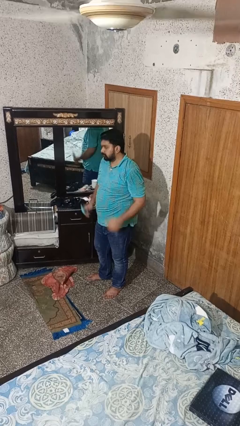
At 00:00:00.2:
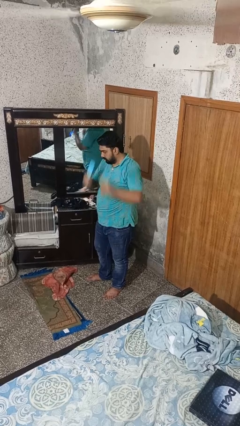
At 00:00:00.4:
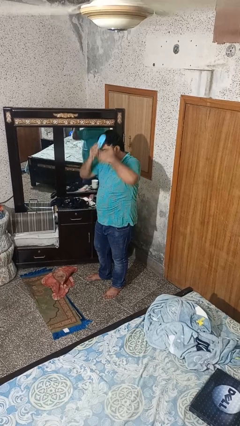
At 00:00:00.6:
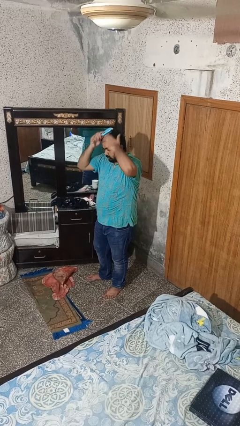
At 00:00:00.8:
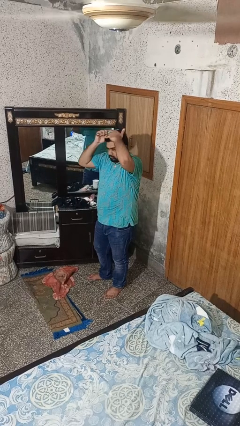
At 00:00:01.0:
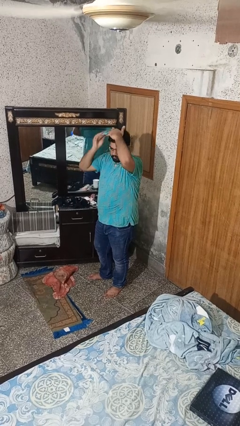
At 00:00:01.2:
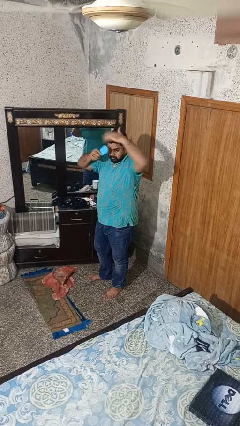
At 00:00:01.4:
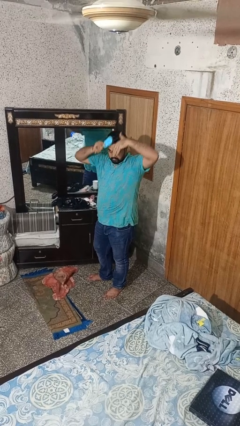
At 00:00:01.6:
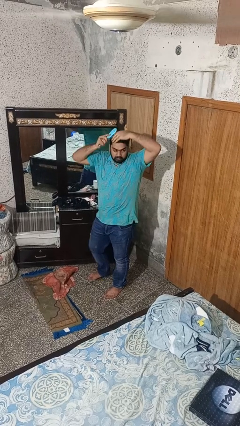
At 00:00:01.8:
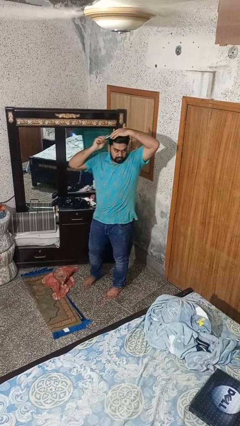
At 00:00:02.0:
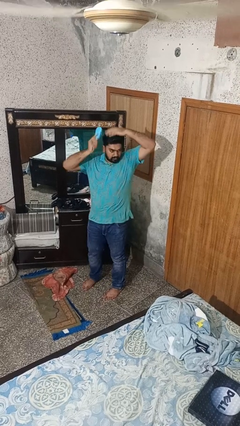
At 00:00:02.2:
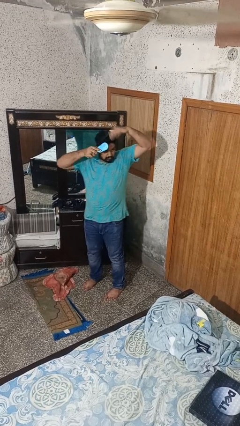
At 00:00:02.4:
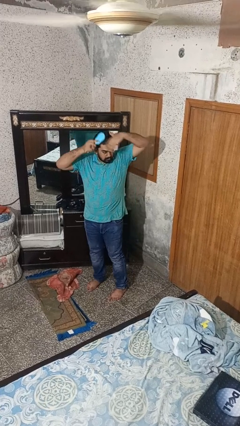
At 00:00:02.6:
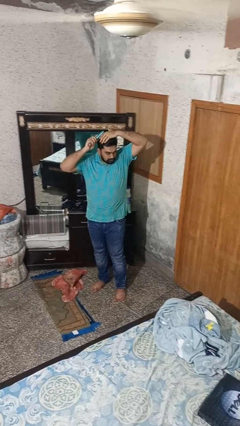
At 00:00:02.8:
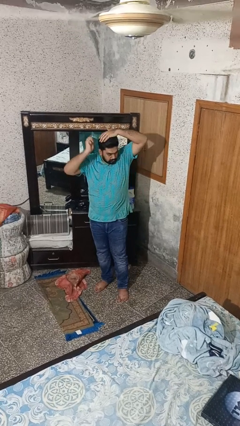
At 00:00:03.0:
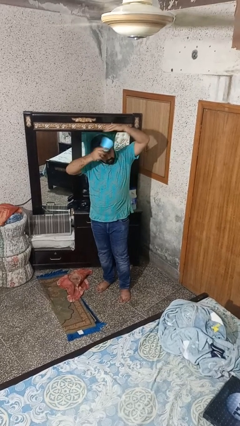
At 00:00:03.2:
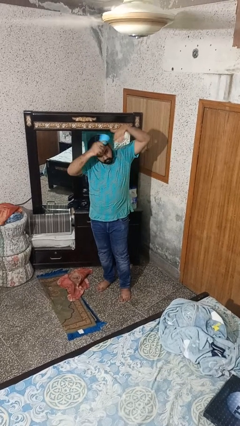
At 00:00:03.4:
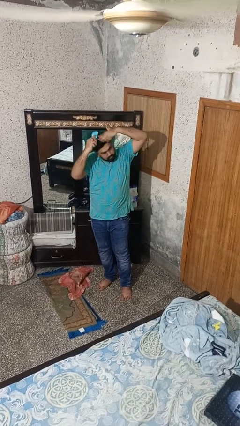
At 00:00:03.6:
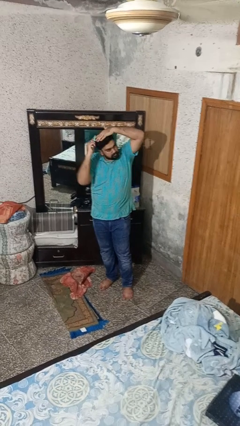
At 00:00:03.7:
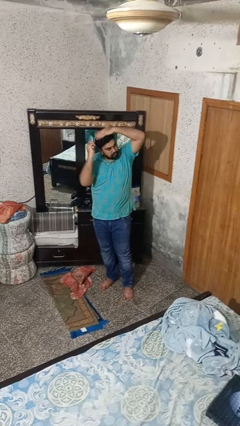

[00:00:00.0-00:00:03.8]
person brushes hair

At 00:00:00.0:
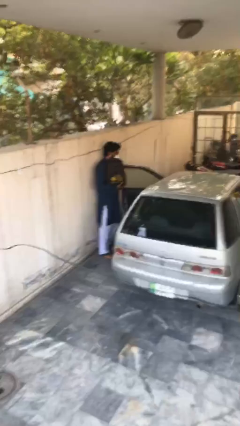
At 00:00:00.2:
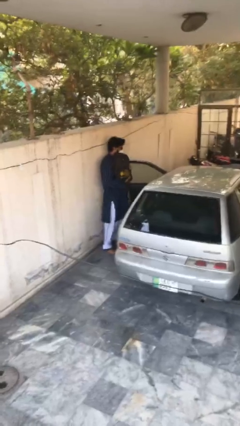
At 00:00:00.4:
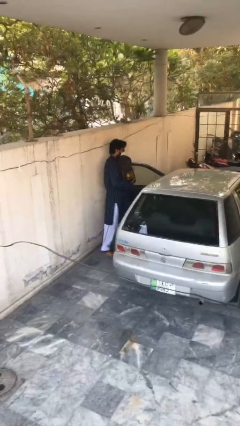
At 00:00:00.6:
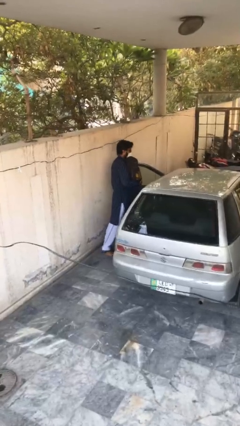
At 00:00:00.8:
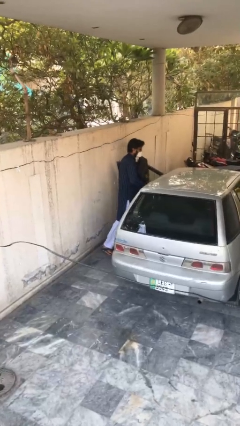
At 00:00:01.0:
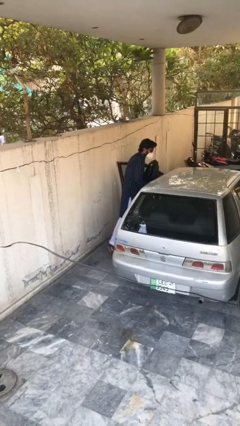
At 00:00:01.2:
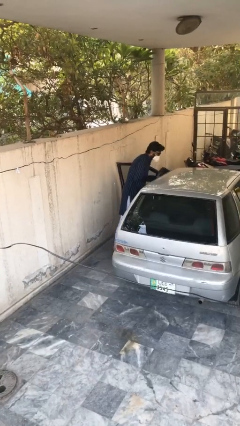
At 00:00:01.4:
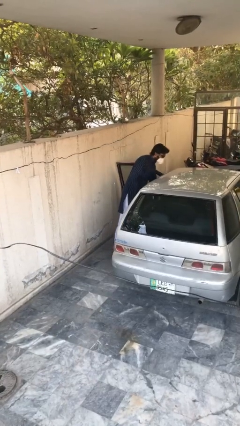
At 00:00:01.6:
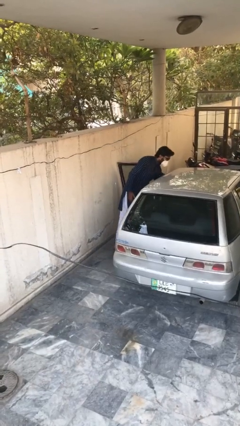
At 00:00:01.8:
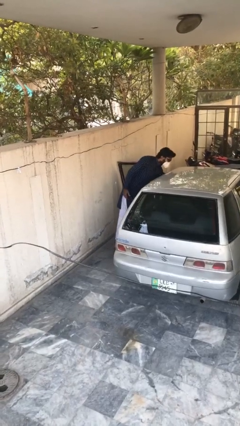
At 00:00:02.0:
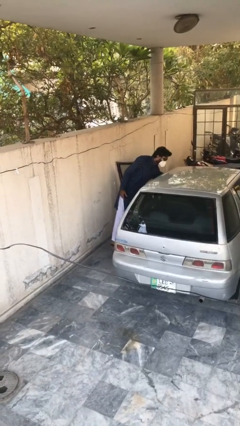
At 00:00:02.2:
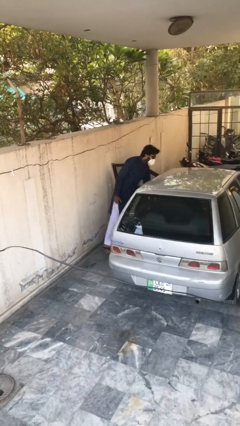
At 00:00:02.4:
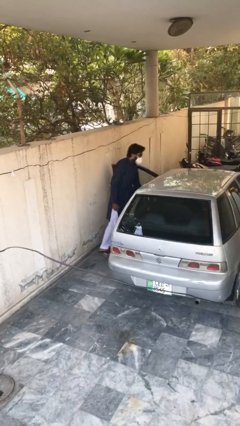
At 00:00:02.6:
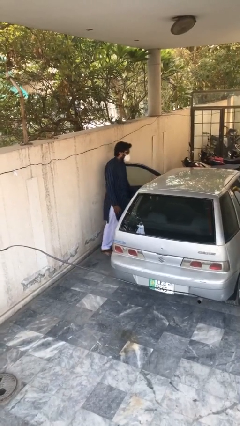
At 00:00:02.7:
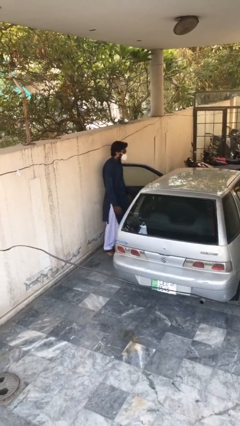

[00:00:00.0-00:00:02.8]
person loads car

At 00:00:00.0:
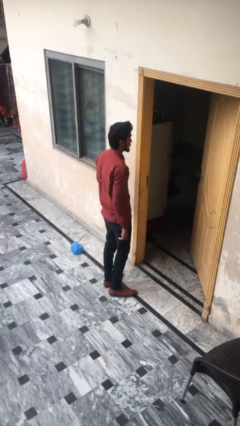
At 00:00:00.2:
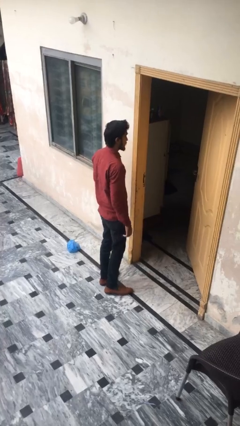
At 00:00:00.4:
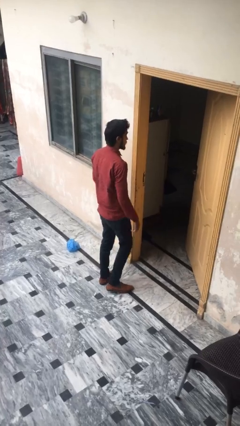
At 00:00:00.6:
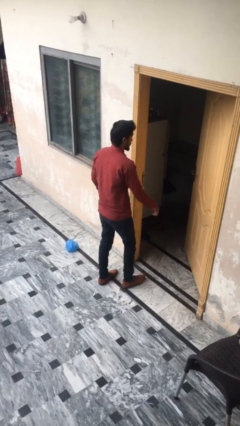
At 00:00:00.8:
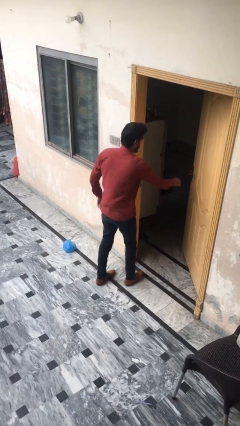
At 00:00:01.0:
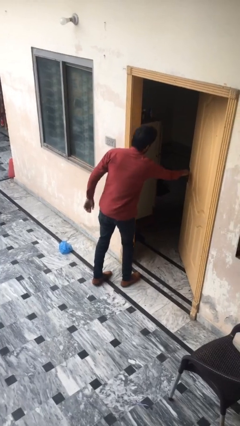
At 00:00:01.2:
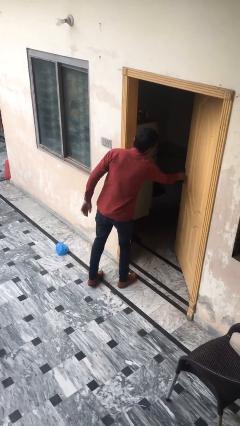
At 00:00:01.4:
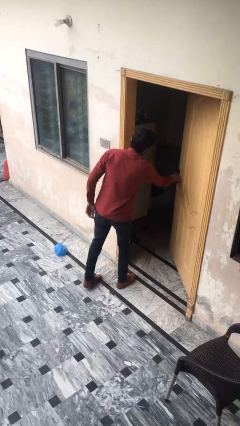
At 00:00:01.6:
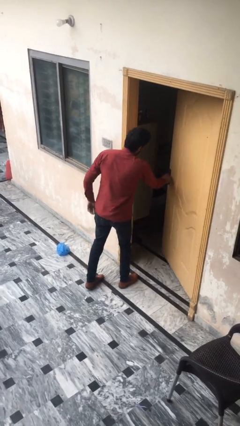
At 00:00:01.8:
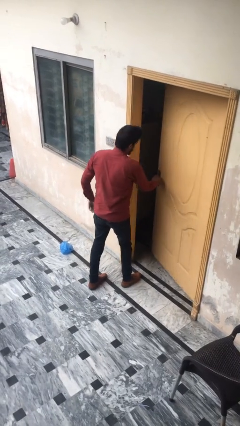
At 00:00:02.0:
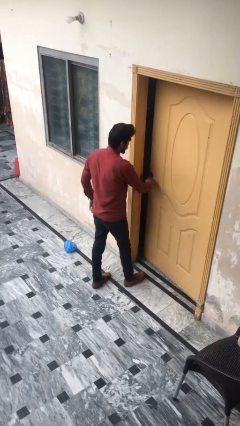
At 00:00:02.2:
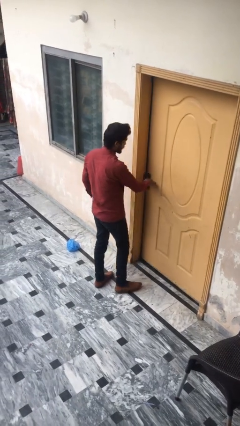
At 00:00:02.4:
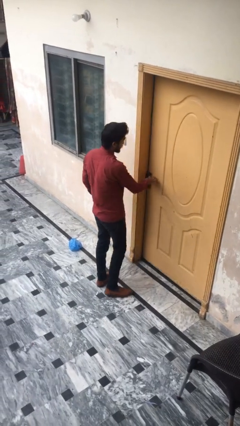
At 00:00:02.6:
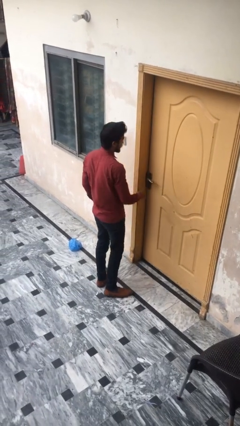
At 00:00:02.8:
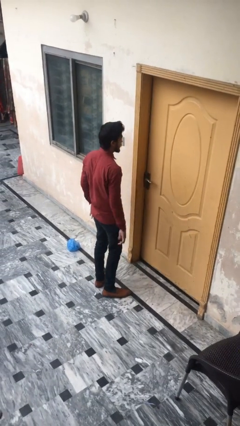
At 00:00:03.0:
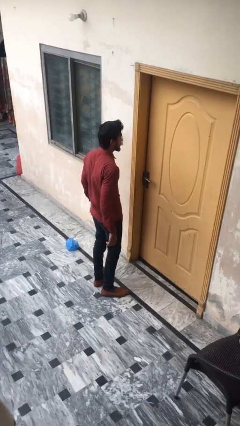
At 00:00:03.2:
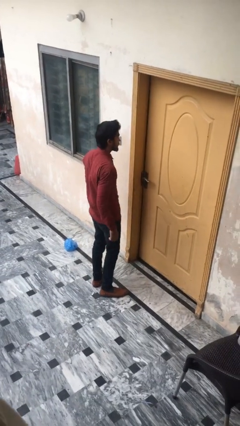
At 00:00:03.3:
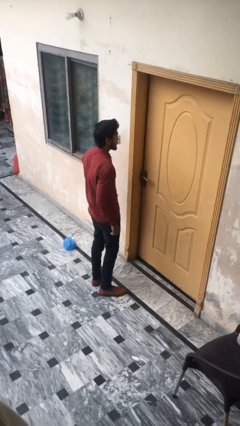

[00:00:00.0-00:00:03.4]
person closes facility door

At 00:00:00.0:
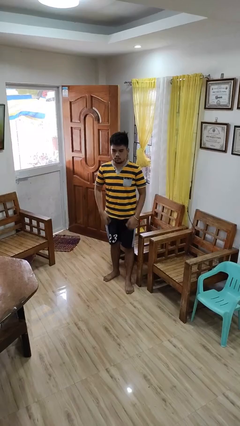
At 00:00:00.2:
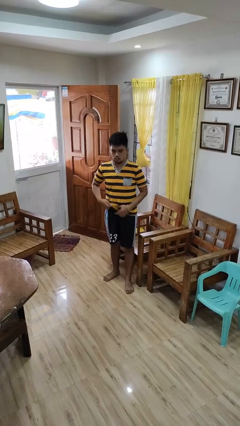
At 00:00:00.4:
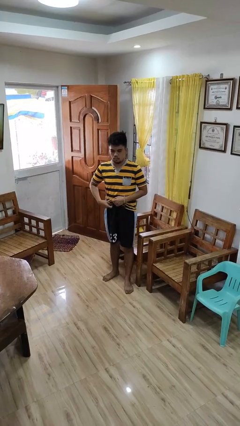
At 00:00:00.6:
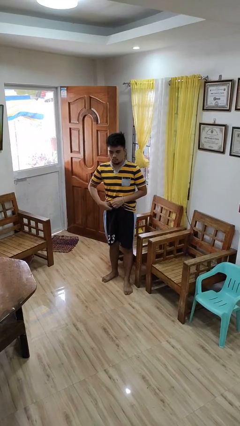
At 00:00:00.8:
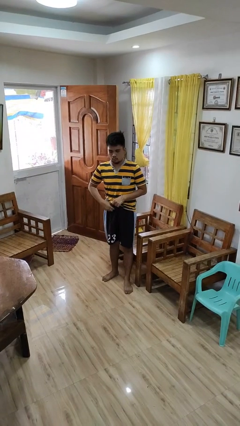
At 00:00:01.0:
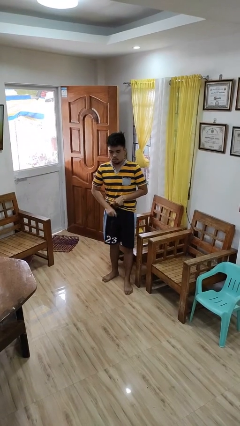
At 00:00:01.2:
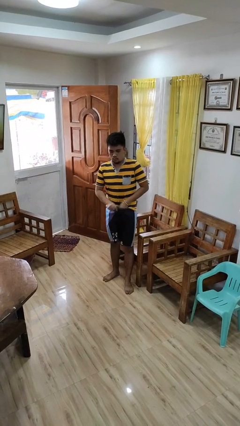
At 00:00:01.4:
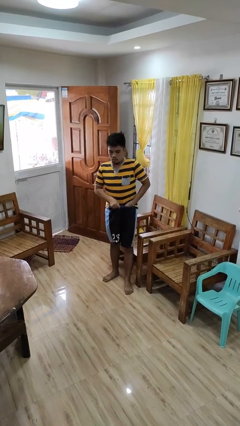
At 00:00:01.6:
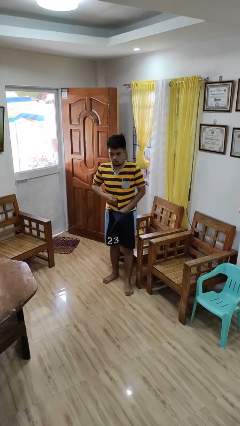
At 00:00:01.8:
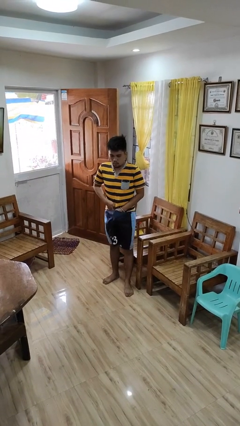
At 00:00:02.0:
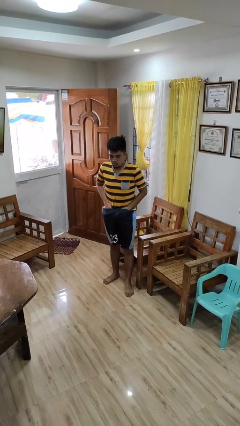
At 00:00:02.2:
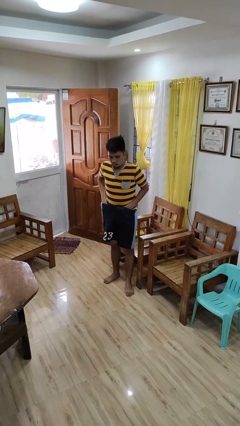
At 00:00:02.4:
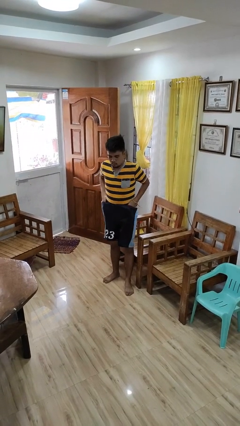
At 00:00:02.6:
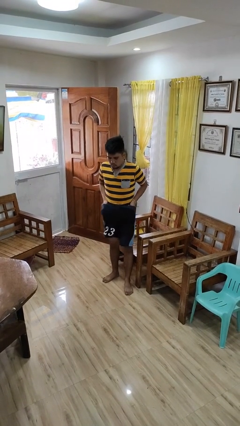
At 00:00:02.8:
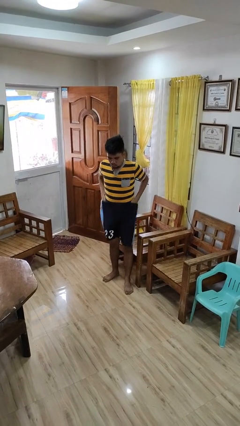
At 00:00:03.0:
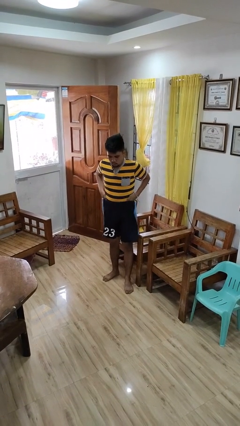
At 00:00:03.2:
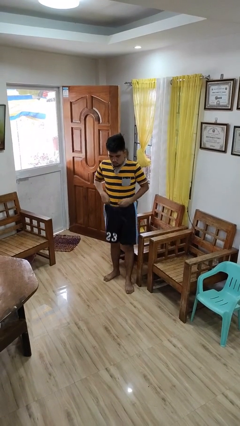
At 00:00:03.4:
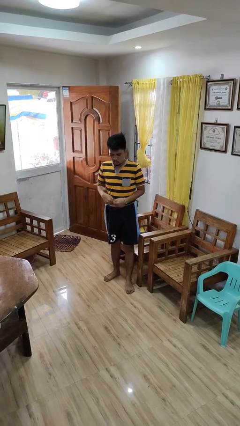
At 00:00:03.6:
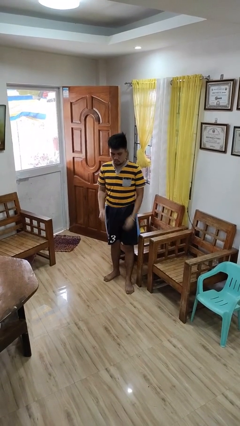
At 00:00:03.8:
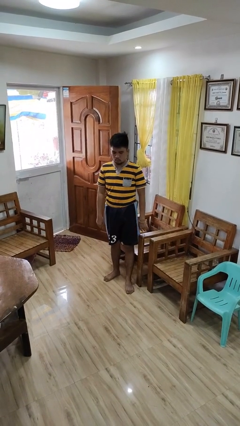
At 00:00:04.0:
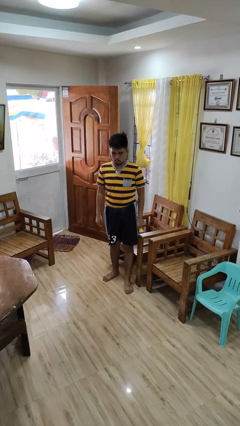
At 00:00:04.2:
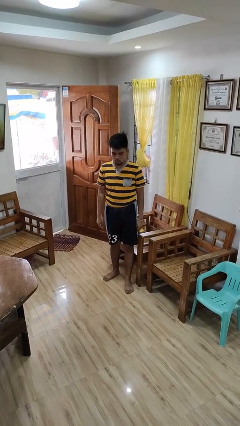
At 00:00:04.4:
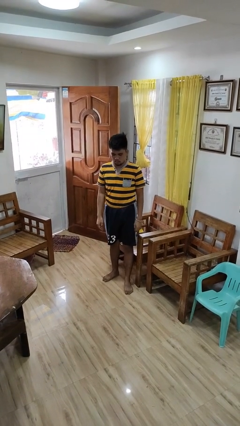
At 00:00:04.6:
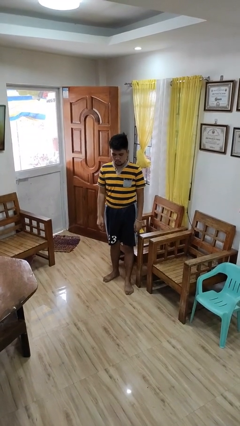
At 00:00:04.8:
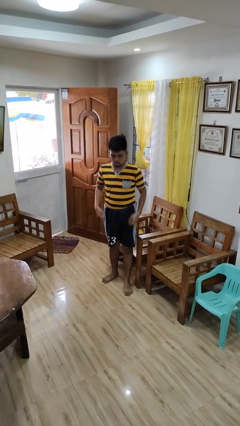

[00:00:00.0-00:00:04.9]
person tucks in shirt

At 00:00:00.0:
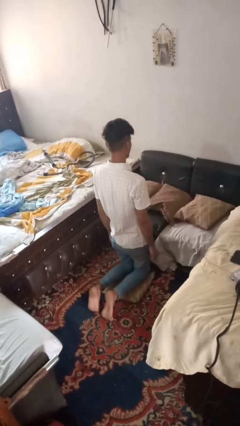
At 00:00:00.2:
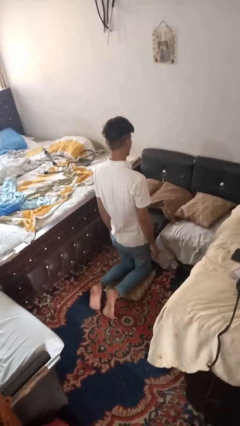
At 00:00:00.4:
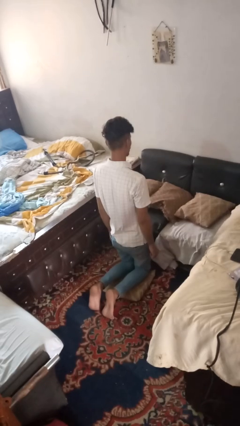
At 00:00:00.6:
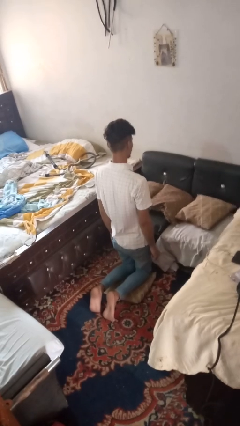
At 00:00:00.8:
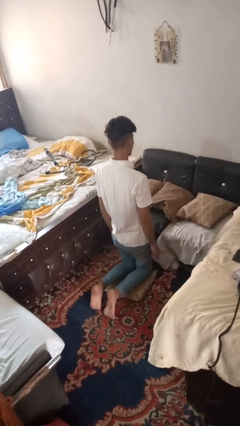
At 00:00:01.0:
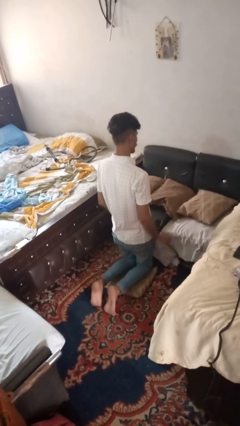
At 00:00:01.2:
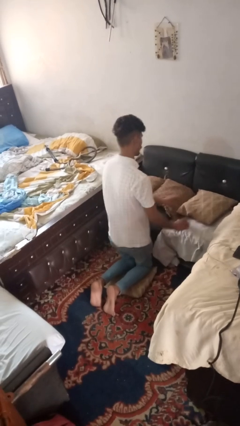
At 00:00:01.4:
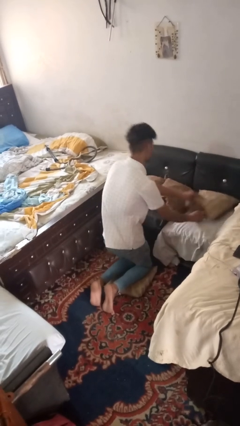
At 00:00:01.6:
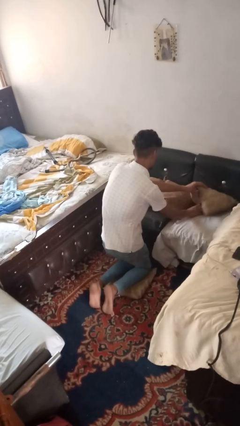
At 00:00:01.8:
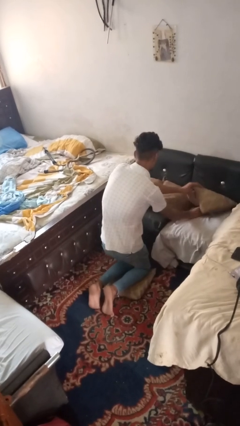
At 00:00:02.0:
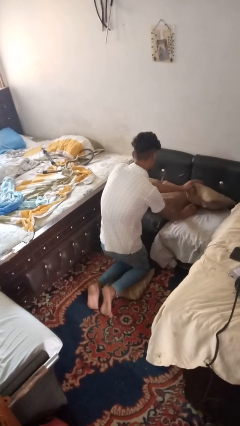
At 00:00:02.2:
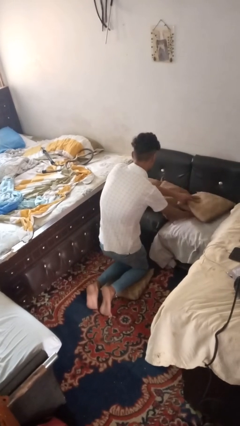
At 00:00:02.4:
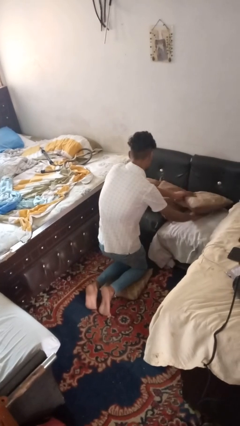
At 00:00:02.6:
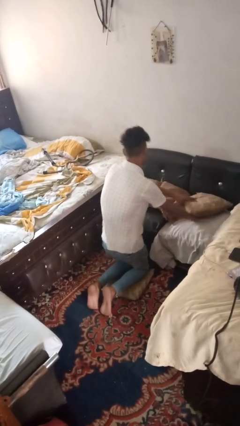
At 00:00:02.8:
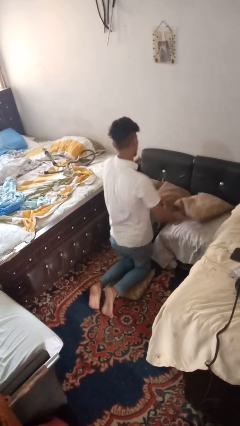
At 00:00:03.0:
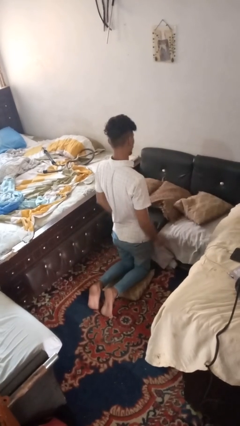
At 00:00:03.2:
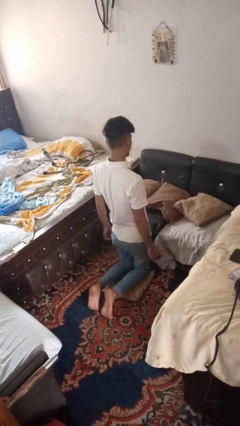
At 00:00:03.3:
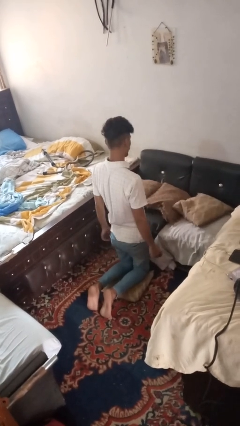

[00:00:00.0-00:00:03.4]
person searches in couch
